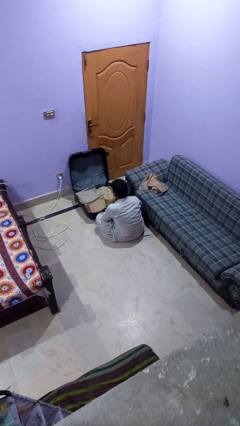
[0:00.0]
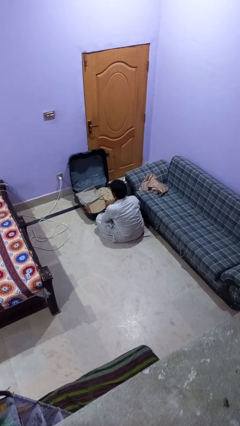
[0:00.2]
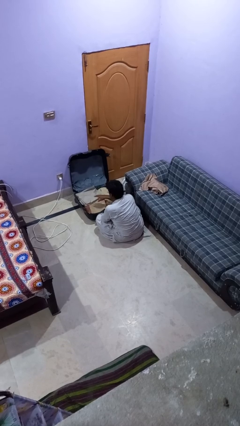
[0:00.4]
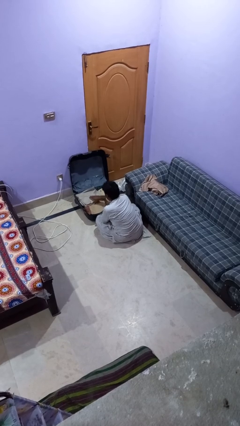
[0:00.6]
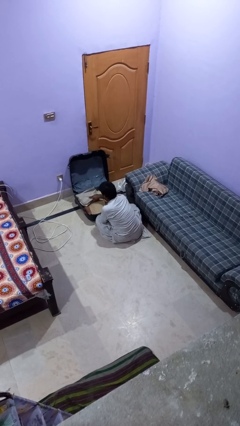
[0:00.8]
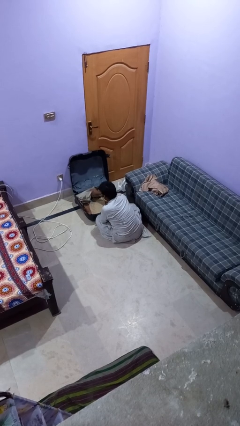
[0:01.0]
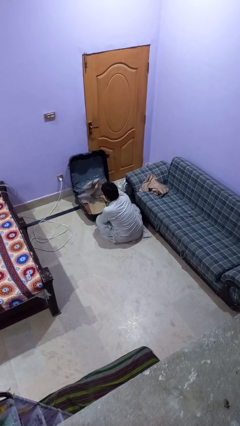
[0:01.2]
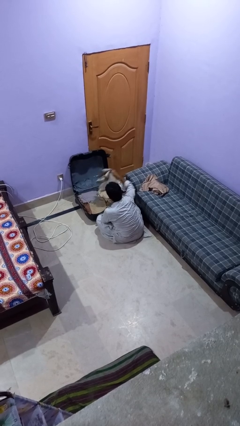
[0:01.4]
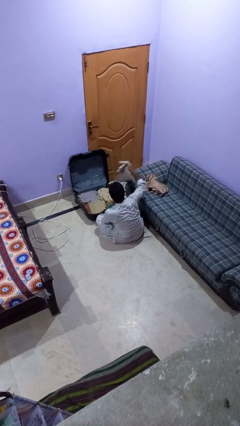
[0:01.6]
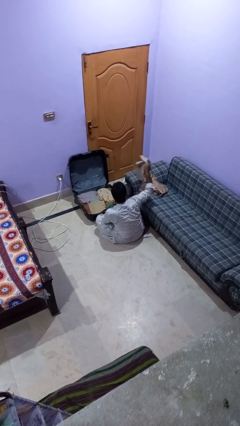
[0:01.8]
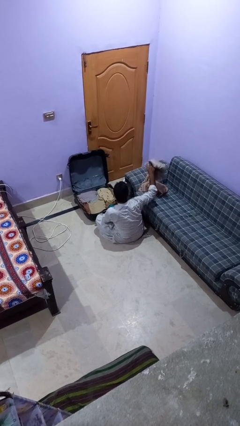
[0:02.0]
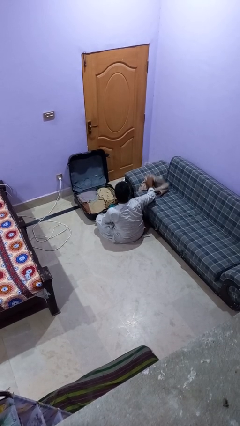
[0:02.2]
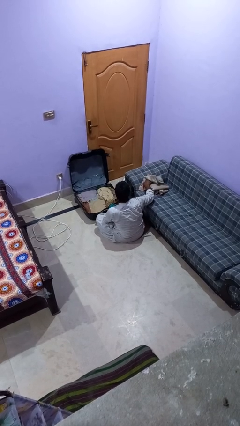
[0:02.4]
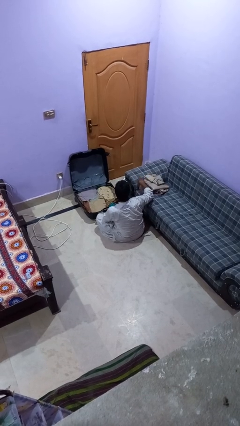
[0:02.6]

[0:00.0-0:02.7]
person unloads clothes from suitcase

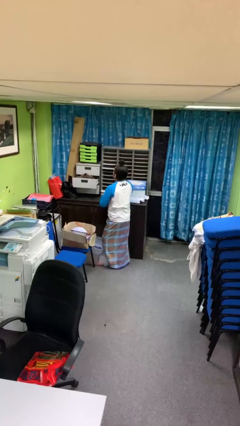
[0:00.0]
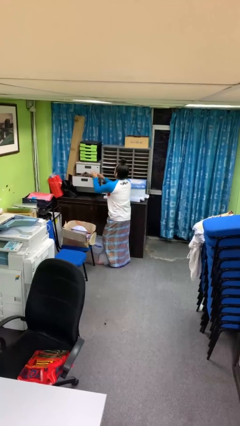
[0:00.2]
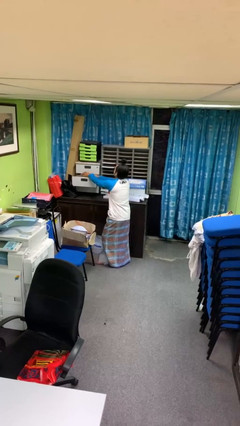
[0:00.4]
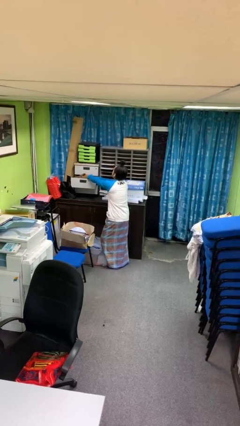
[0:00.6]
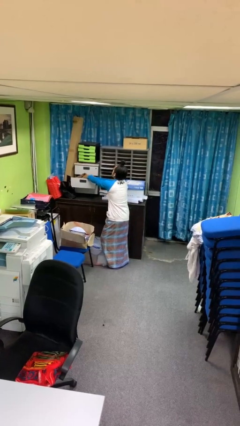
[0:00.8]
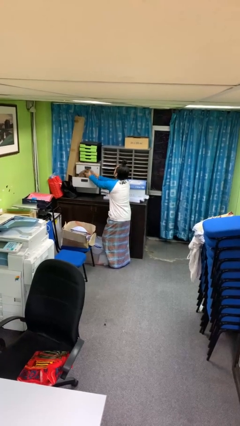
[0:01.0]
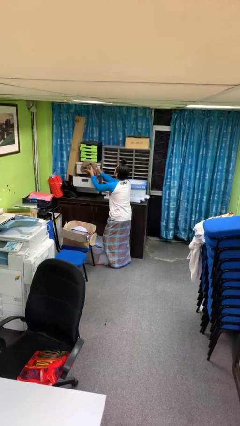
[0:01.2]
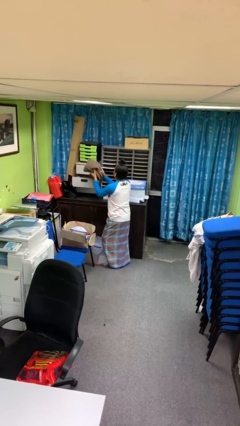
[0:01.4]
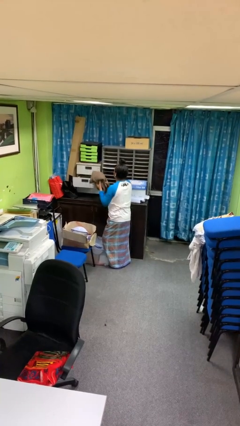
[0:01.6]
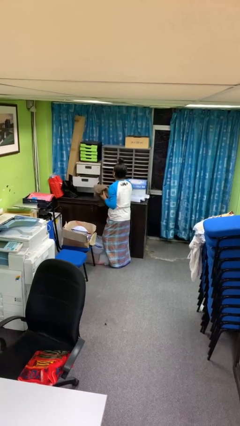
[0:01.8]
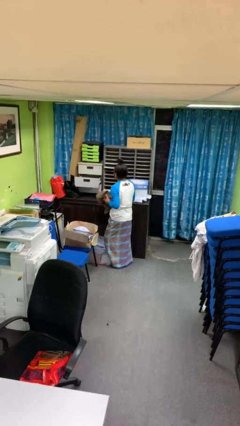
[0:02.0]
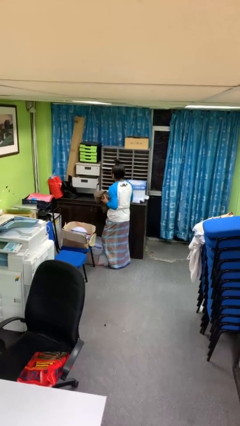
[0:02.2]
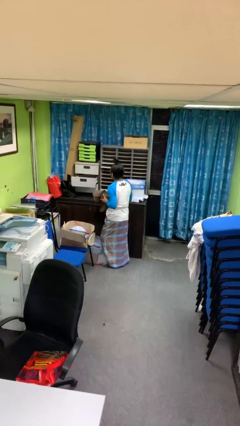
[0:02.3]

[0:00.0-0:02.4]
person takes clothes from dresser

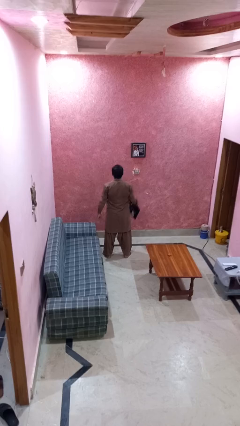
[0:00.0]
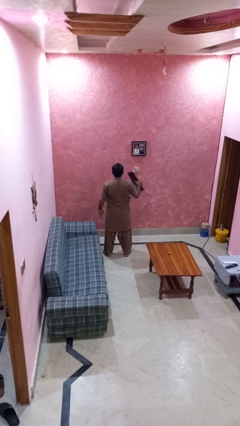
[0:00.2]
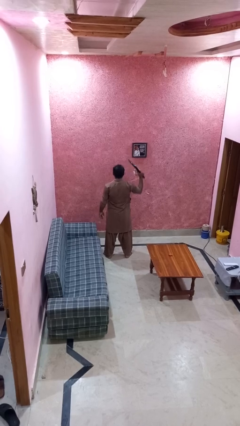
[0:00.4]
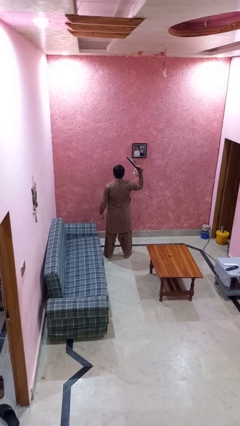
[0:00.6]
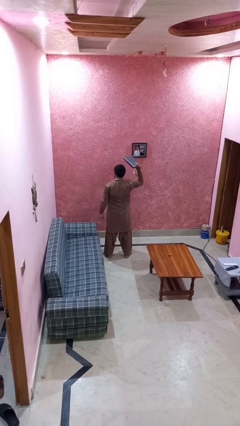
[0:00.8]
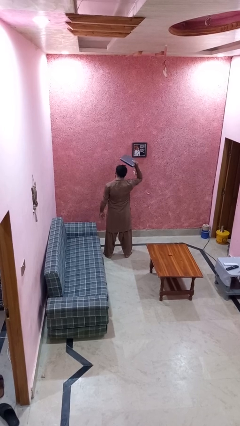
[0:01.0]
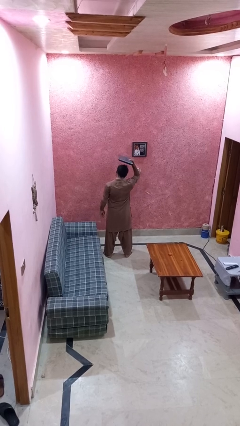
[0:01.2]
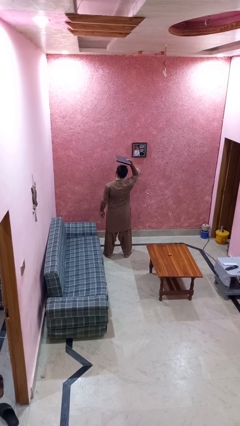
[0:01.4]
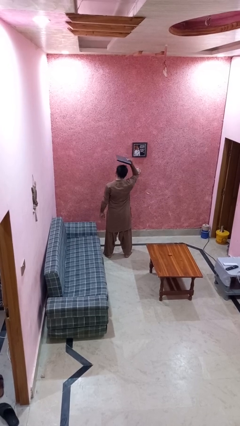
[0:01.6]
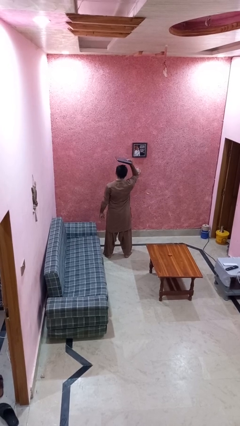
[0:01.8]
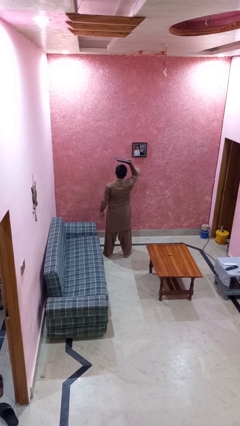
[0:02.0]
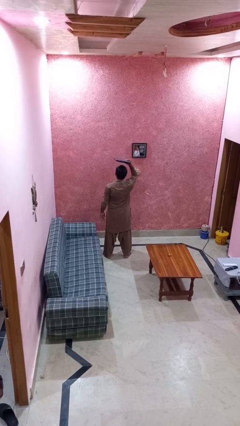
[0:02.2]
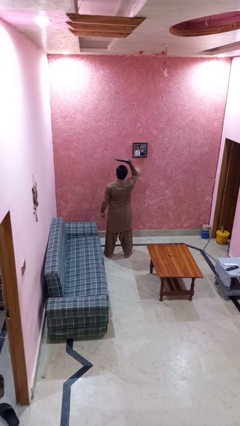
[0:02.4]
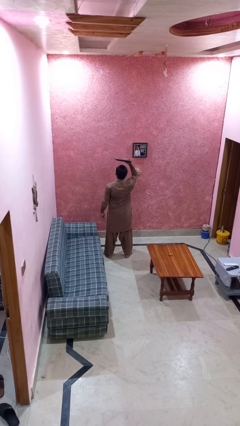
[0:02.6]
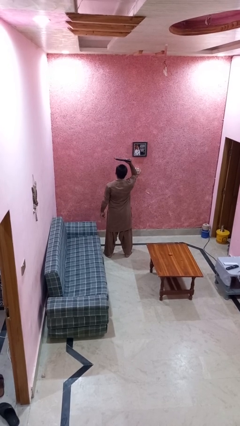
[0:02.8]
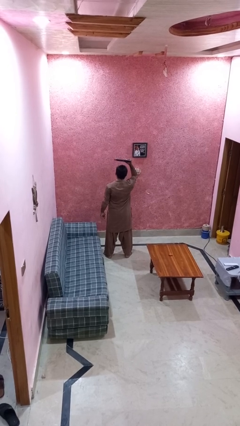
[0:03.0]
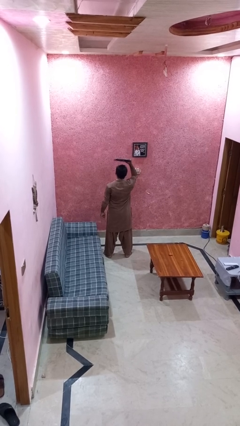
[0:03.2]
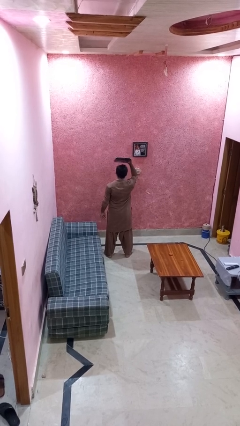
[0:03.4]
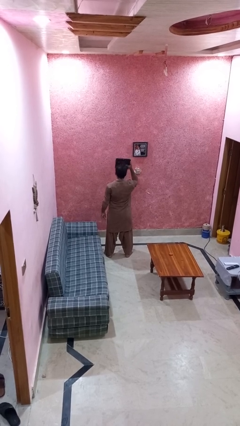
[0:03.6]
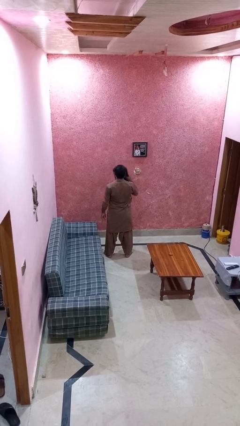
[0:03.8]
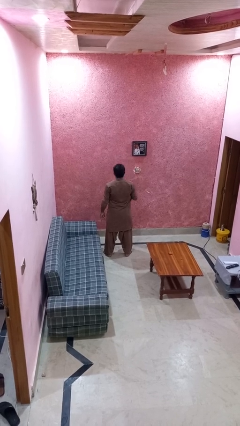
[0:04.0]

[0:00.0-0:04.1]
person holds object above head

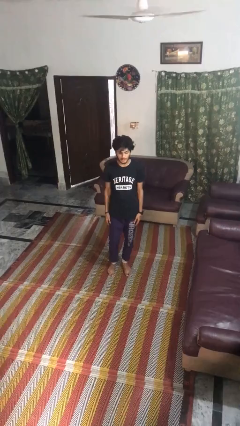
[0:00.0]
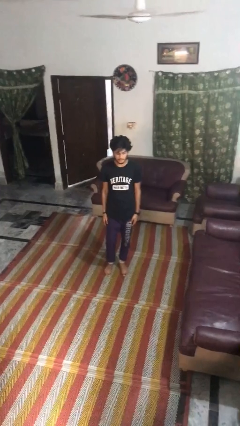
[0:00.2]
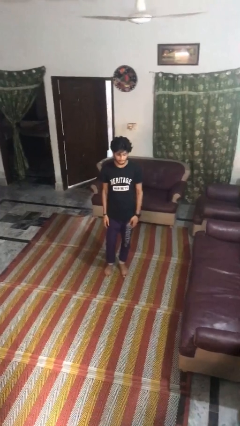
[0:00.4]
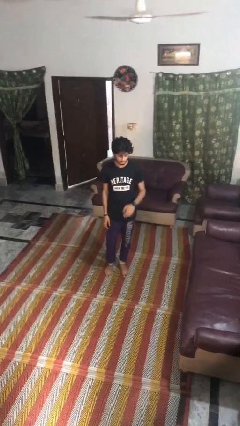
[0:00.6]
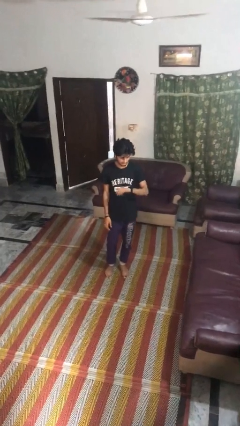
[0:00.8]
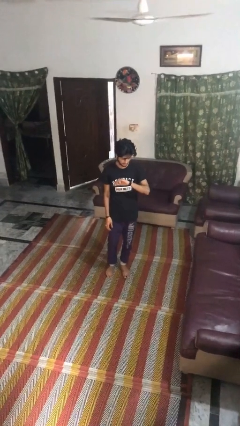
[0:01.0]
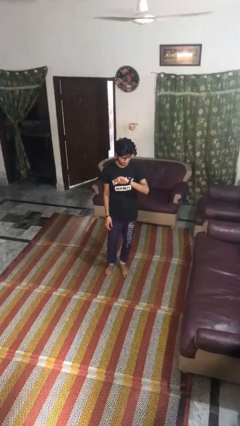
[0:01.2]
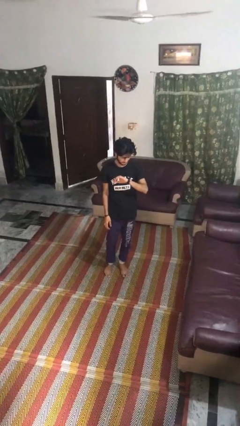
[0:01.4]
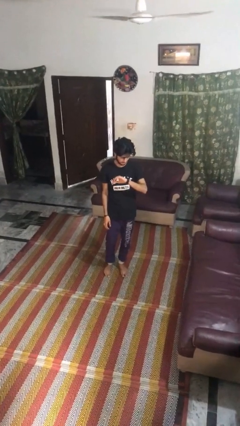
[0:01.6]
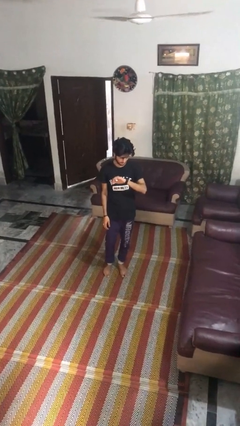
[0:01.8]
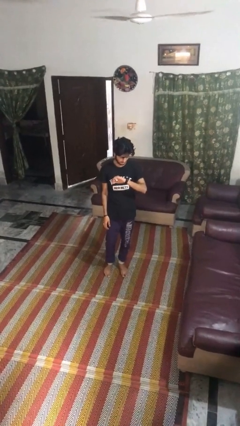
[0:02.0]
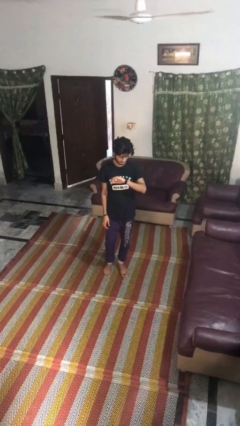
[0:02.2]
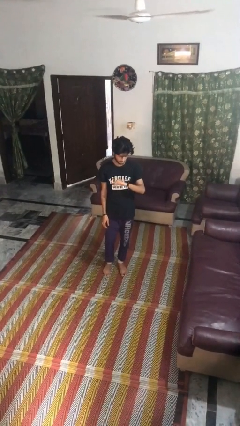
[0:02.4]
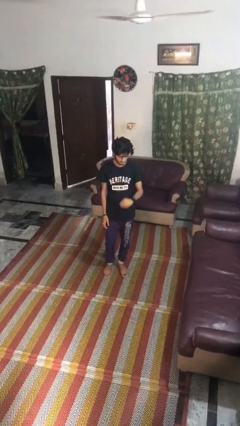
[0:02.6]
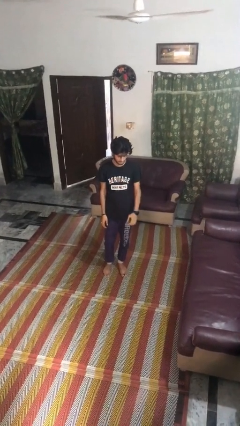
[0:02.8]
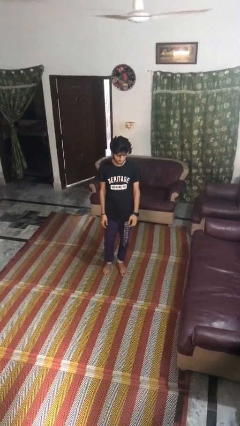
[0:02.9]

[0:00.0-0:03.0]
person looks at wristwatch

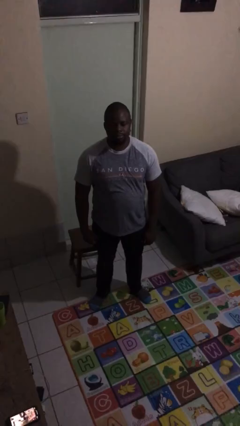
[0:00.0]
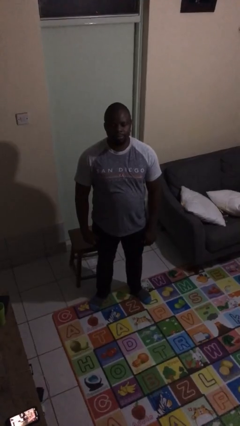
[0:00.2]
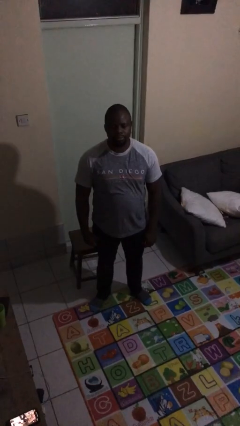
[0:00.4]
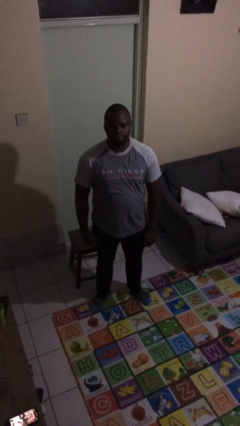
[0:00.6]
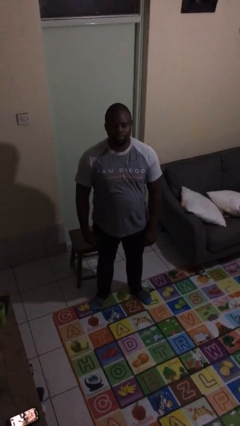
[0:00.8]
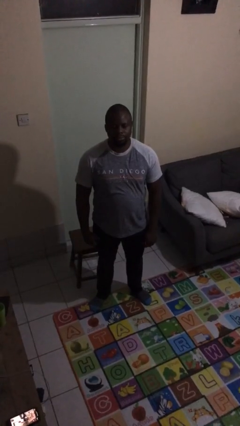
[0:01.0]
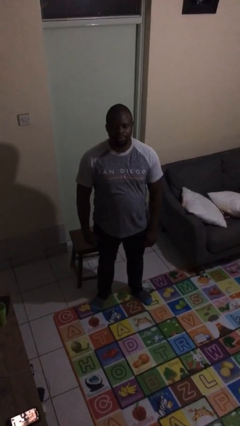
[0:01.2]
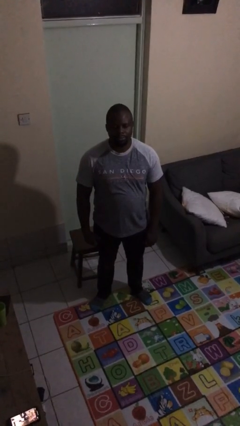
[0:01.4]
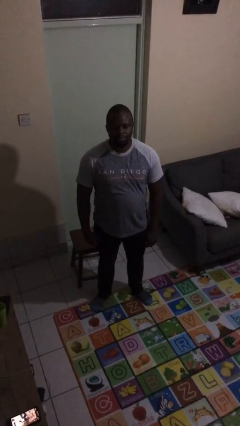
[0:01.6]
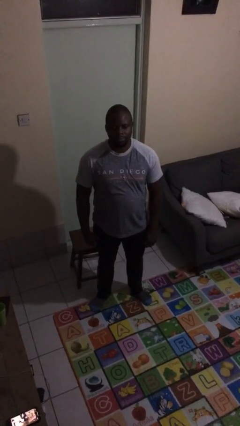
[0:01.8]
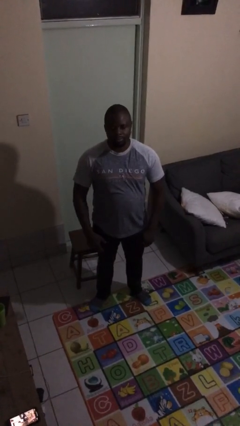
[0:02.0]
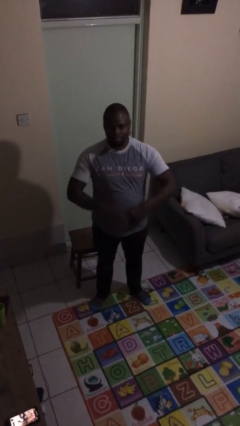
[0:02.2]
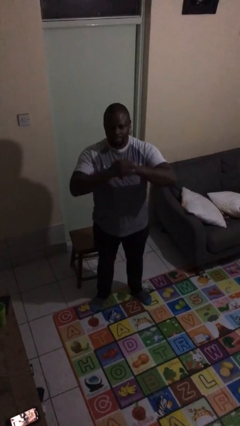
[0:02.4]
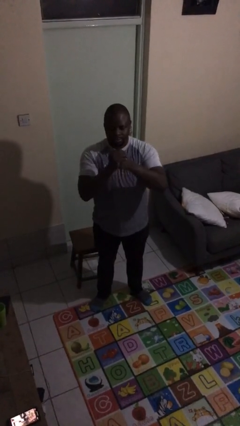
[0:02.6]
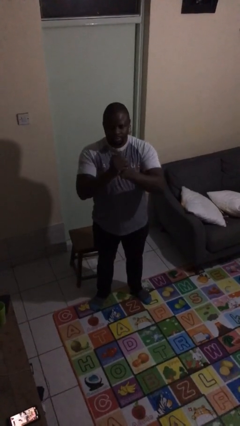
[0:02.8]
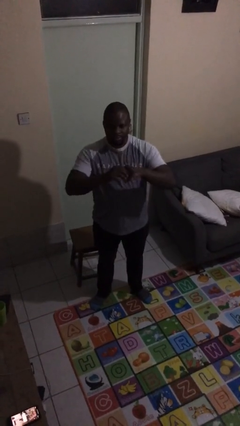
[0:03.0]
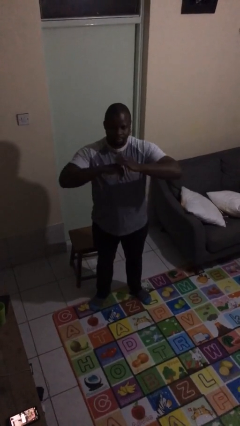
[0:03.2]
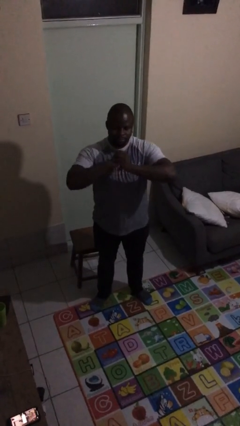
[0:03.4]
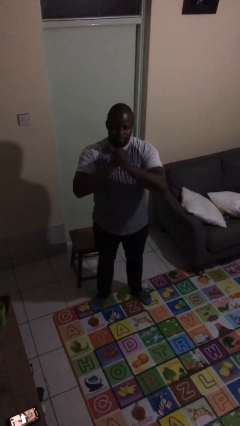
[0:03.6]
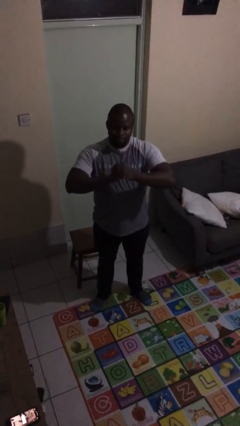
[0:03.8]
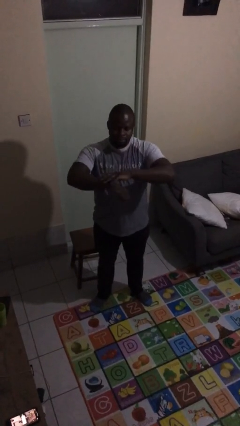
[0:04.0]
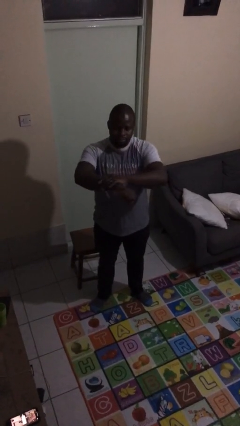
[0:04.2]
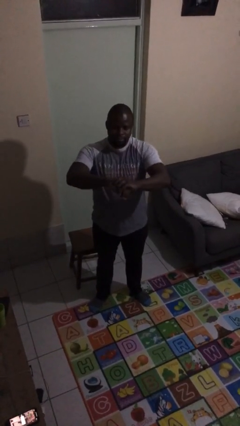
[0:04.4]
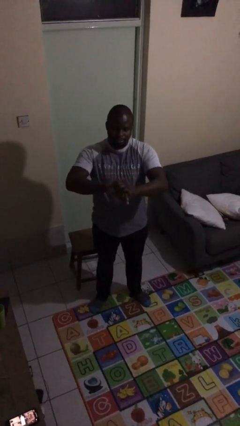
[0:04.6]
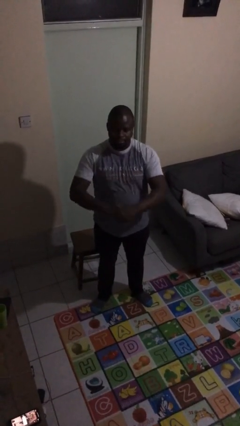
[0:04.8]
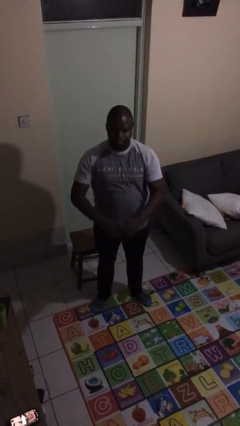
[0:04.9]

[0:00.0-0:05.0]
person cracks knuckles

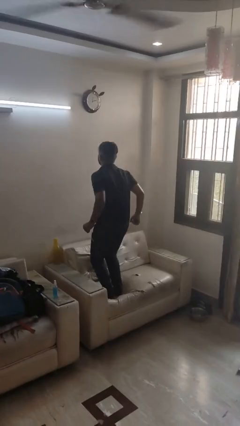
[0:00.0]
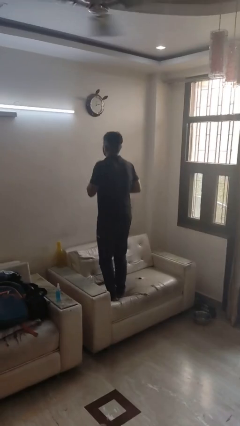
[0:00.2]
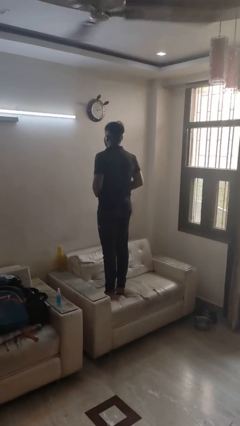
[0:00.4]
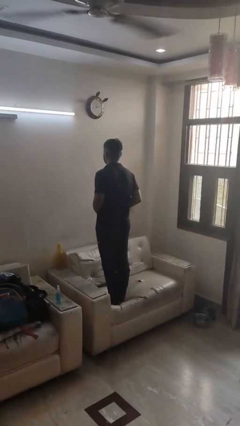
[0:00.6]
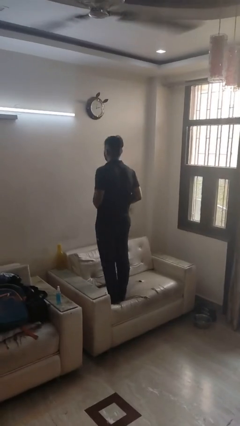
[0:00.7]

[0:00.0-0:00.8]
person jumps on couch
